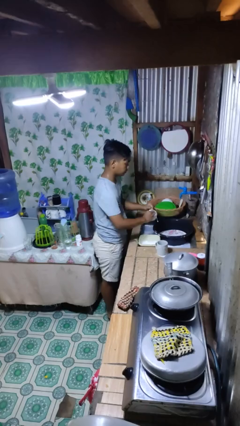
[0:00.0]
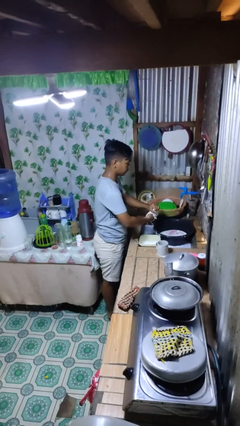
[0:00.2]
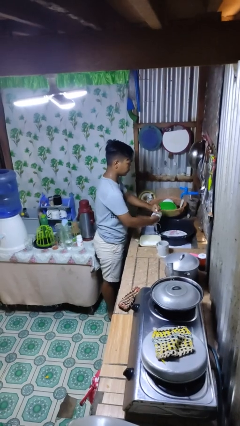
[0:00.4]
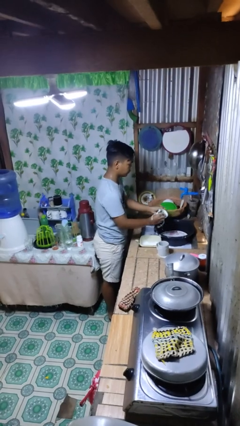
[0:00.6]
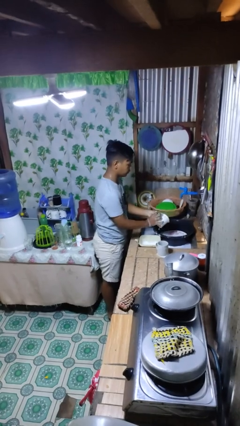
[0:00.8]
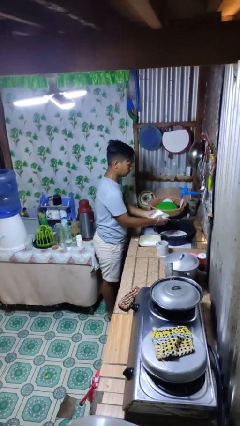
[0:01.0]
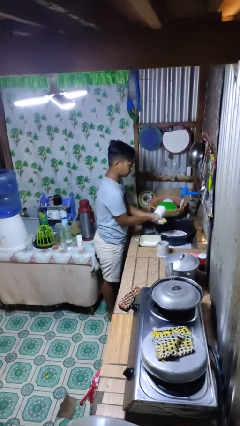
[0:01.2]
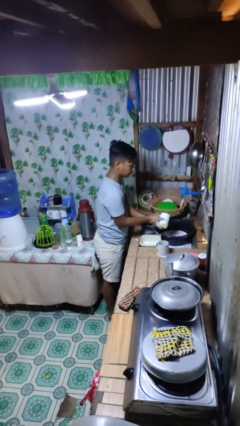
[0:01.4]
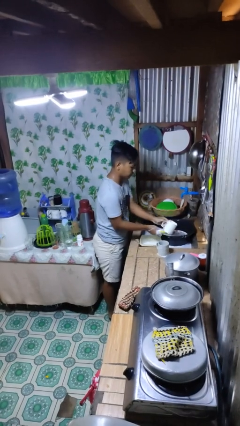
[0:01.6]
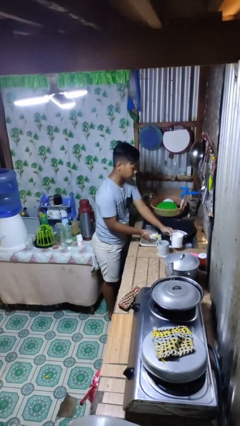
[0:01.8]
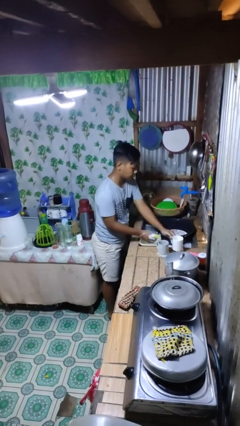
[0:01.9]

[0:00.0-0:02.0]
person washes dish

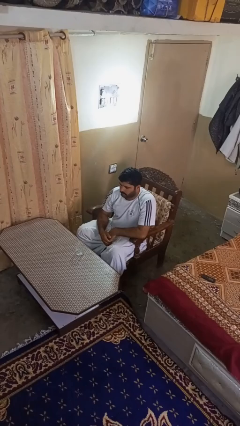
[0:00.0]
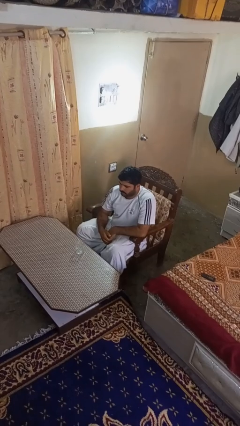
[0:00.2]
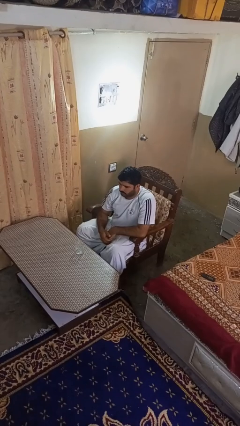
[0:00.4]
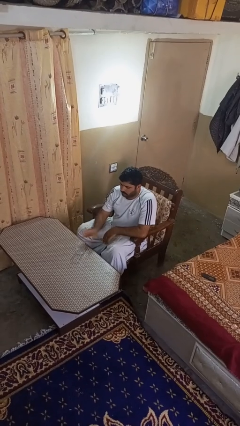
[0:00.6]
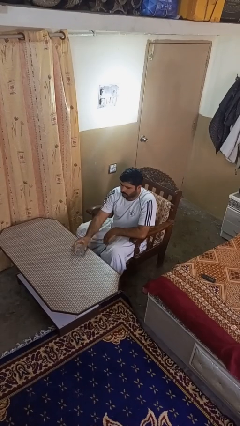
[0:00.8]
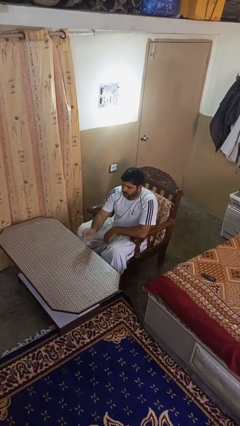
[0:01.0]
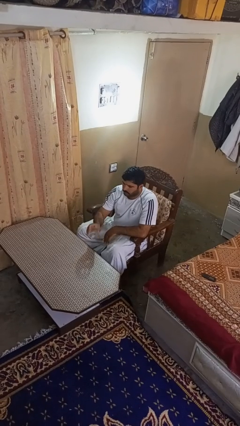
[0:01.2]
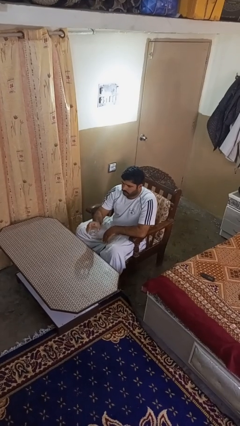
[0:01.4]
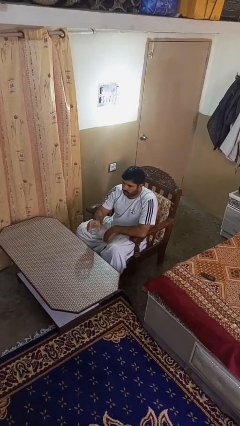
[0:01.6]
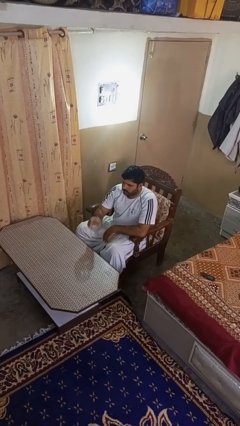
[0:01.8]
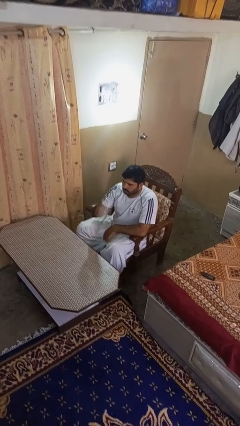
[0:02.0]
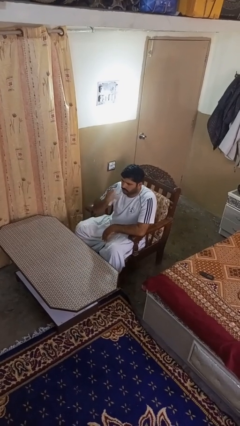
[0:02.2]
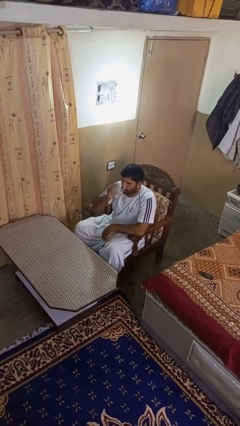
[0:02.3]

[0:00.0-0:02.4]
person picks up object from table

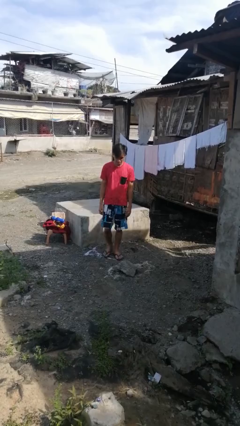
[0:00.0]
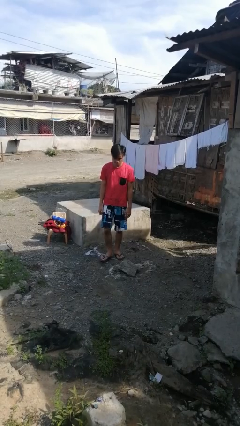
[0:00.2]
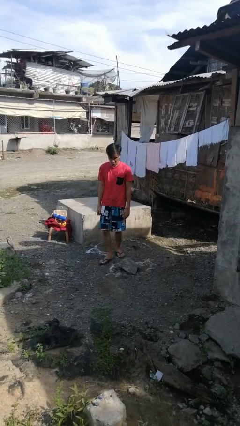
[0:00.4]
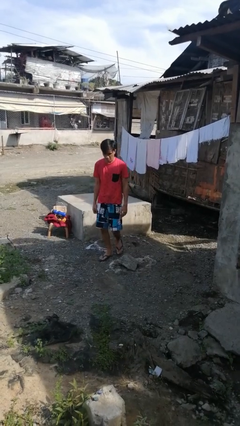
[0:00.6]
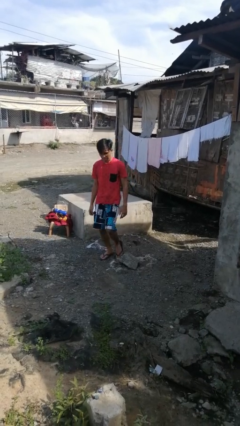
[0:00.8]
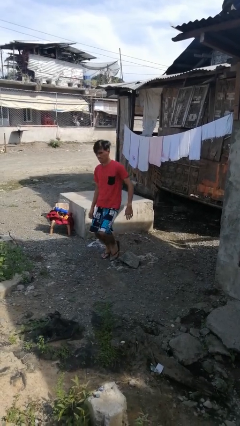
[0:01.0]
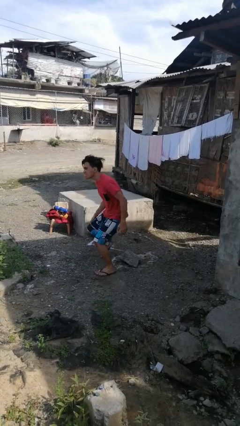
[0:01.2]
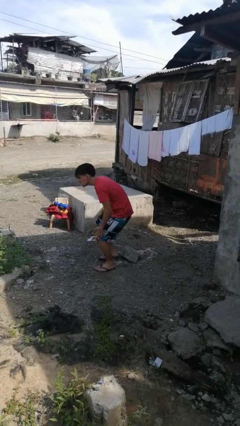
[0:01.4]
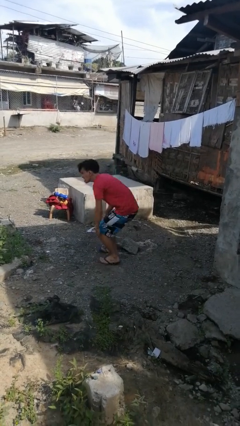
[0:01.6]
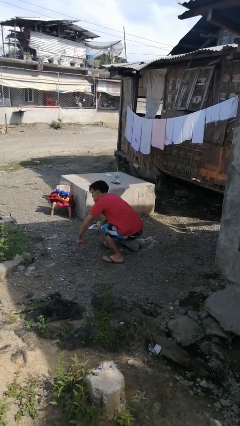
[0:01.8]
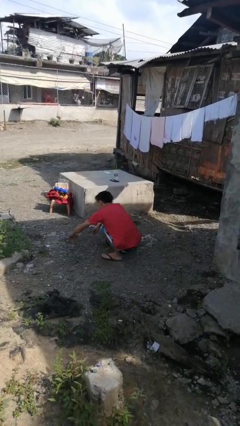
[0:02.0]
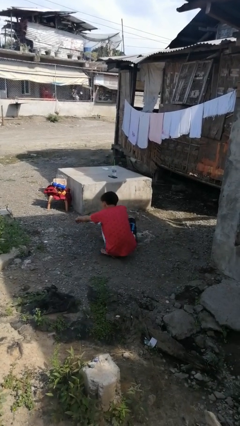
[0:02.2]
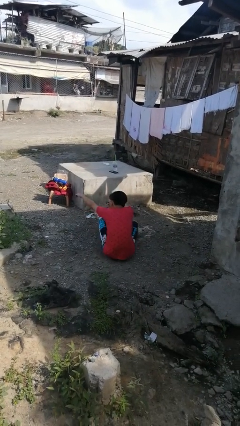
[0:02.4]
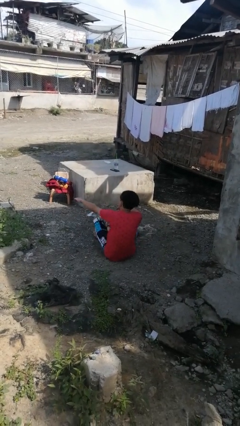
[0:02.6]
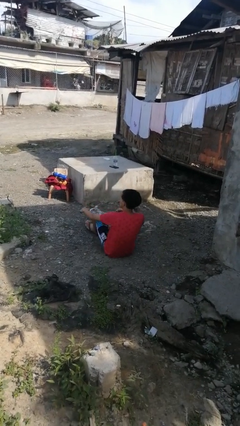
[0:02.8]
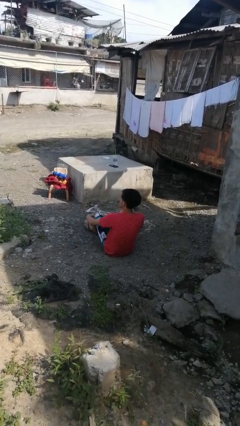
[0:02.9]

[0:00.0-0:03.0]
person trips on object on floor

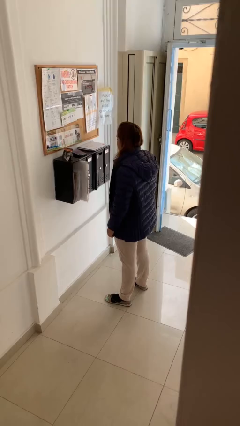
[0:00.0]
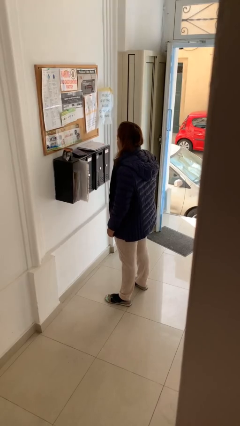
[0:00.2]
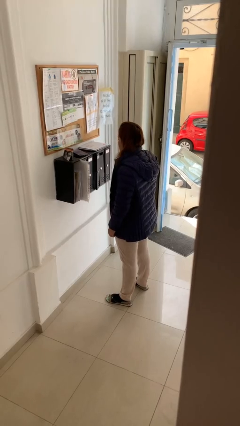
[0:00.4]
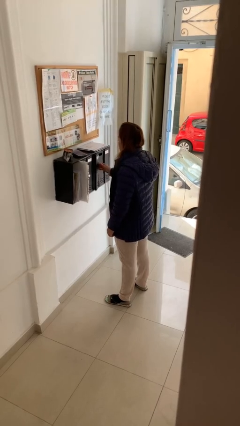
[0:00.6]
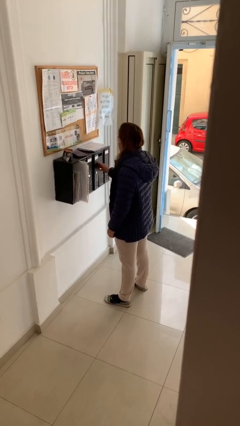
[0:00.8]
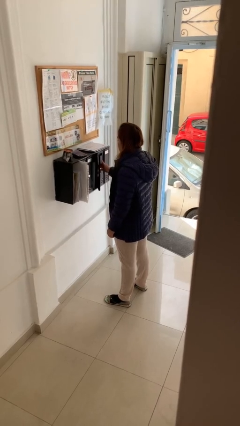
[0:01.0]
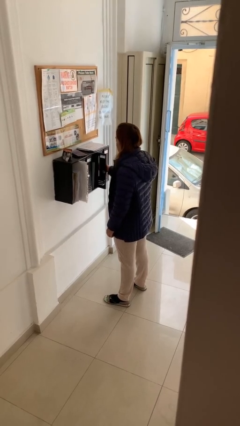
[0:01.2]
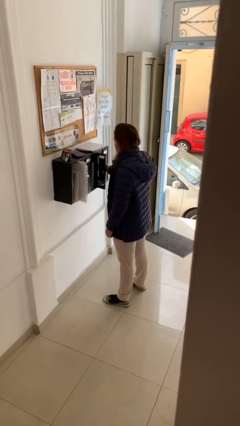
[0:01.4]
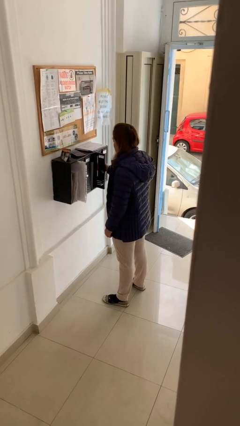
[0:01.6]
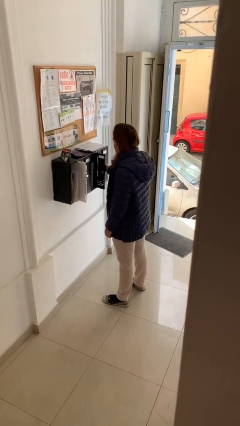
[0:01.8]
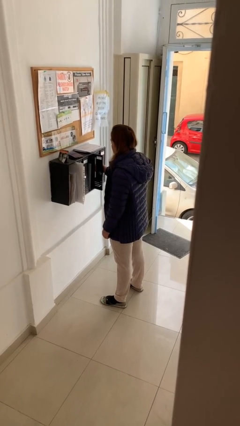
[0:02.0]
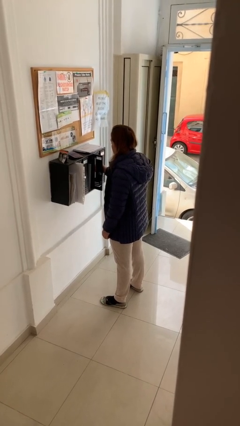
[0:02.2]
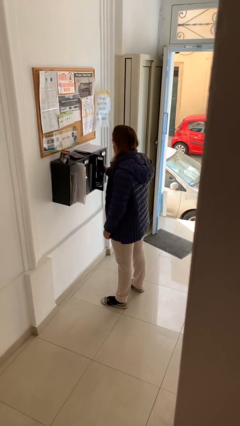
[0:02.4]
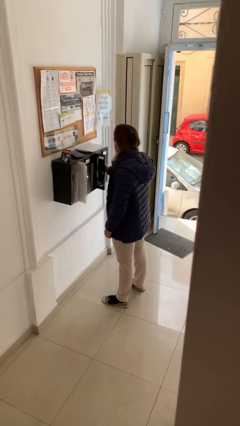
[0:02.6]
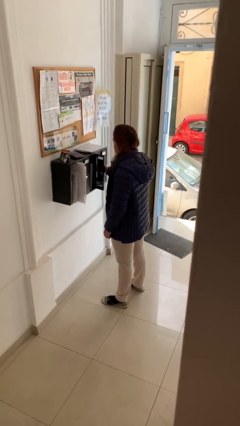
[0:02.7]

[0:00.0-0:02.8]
person opens mailbox

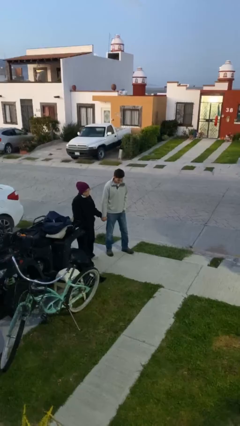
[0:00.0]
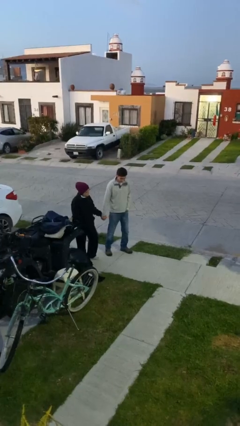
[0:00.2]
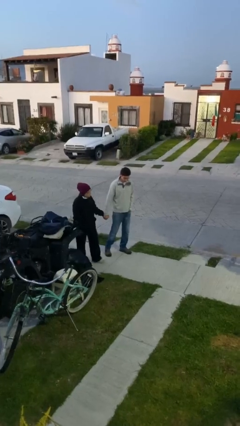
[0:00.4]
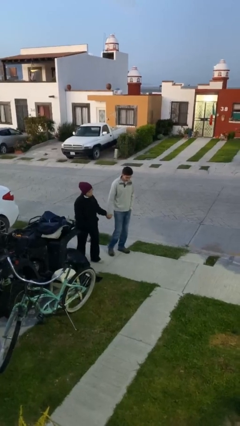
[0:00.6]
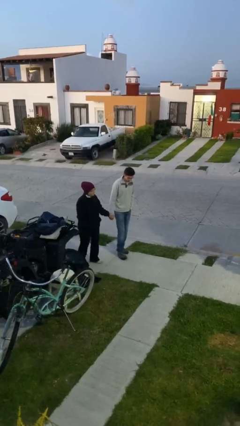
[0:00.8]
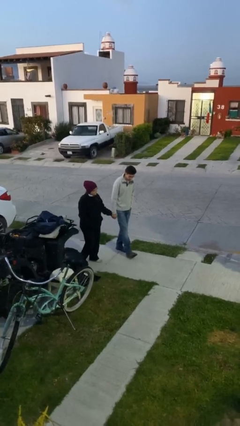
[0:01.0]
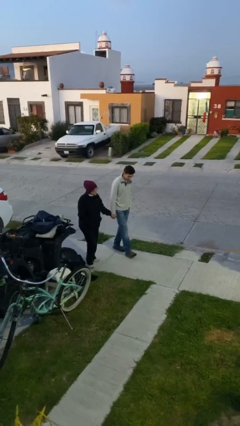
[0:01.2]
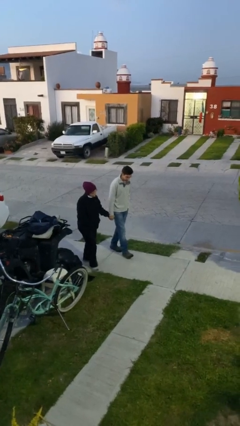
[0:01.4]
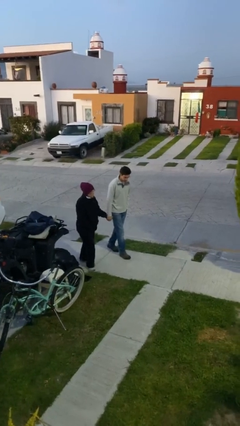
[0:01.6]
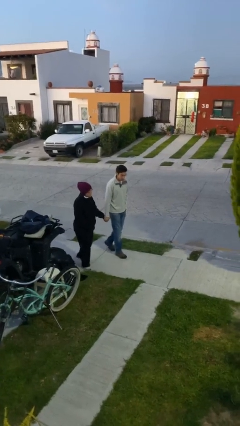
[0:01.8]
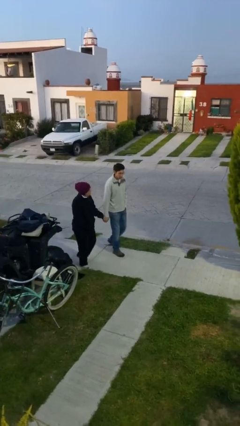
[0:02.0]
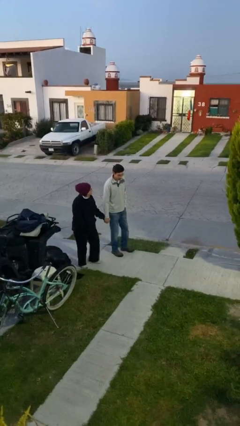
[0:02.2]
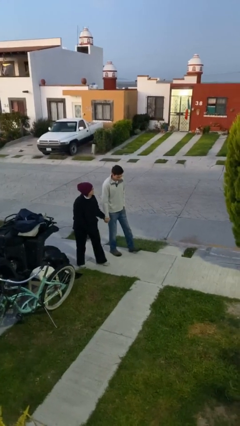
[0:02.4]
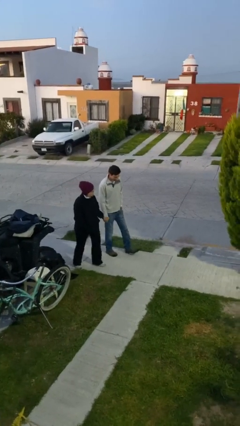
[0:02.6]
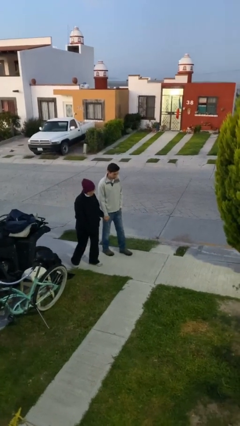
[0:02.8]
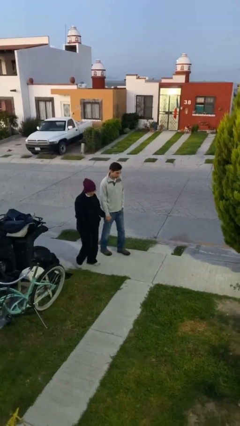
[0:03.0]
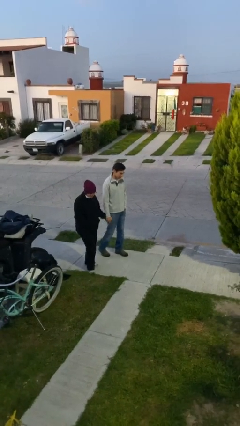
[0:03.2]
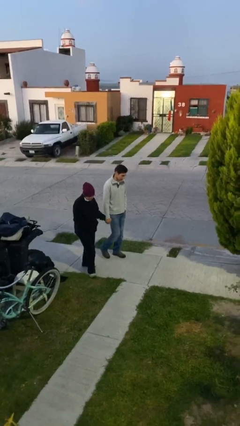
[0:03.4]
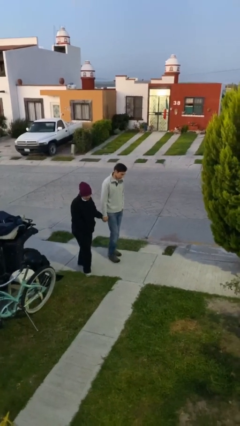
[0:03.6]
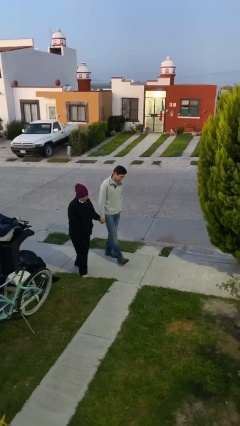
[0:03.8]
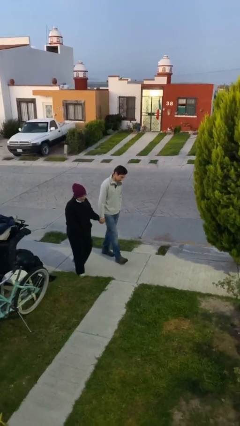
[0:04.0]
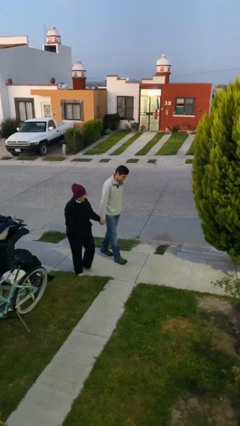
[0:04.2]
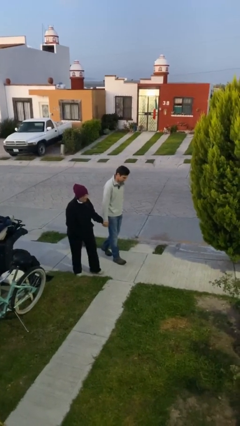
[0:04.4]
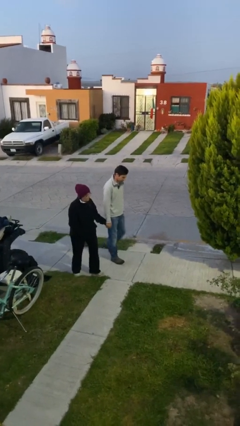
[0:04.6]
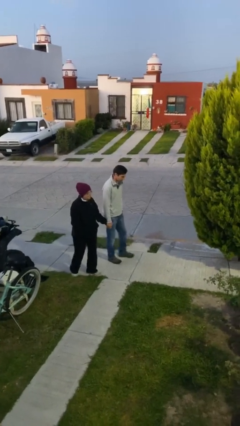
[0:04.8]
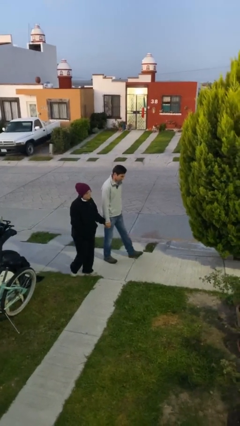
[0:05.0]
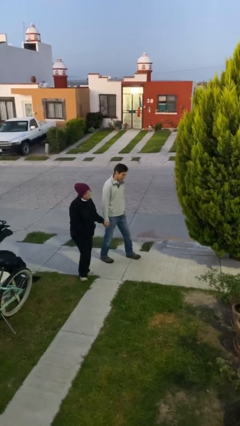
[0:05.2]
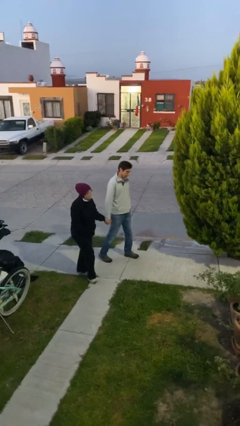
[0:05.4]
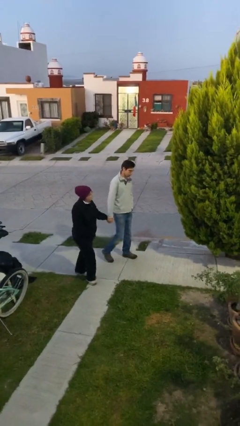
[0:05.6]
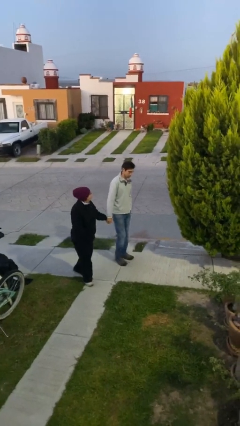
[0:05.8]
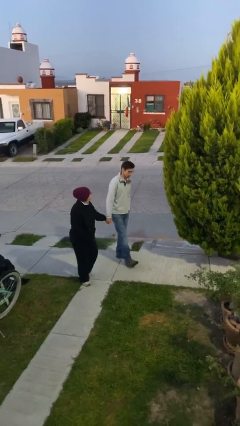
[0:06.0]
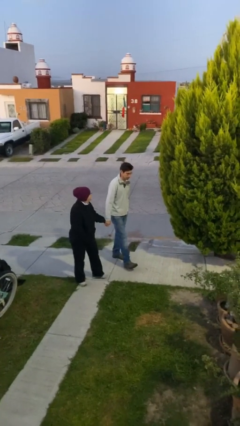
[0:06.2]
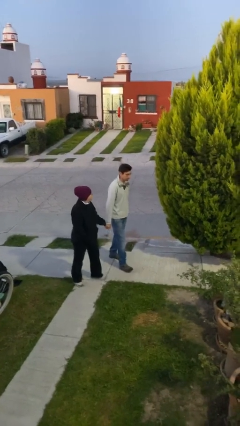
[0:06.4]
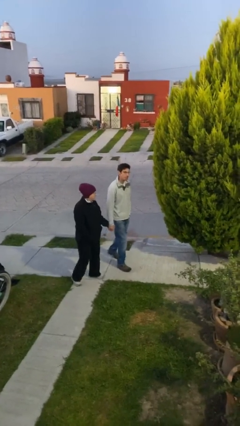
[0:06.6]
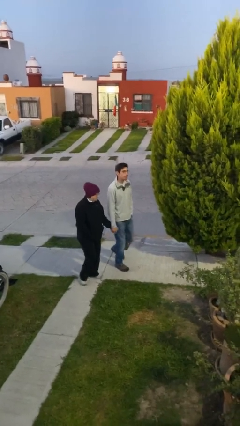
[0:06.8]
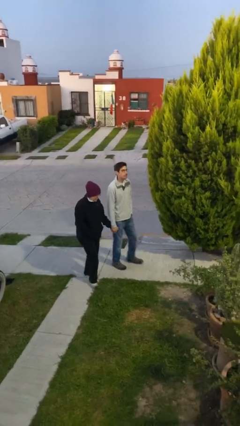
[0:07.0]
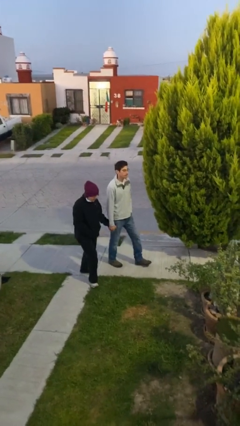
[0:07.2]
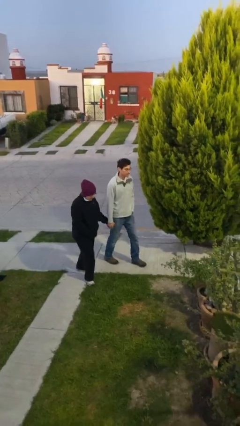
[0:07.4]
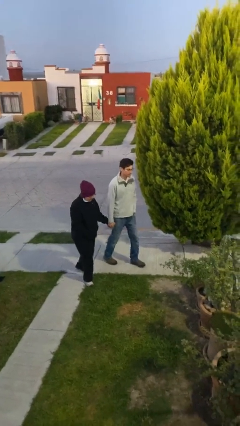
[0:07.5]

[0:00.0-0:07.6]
person holds hand
